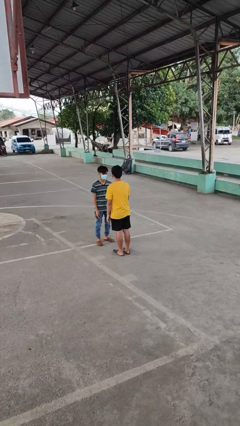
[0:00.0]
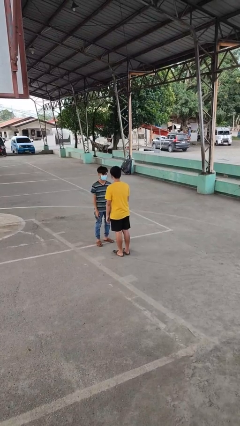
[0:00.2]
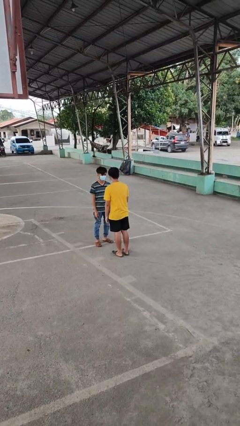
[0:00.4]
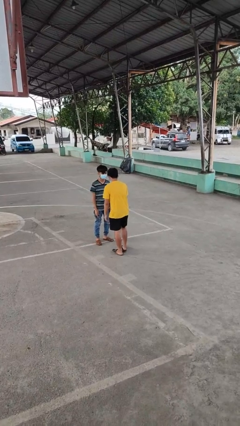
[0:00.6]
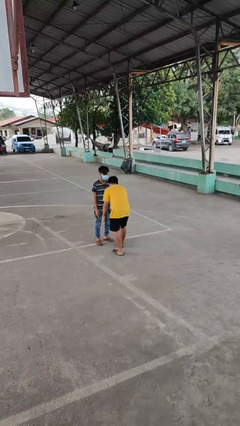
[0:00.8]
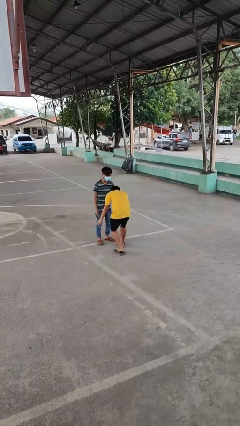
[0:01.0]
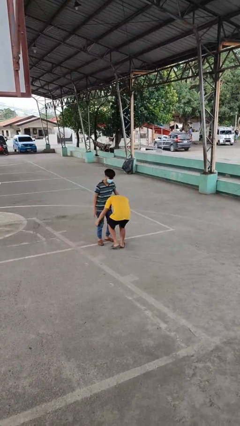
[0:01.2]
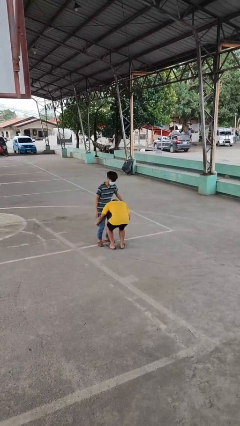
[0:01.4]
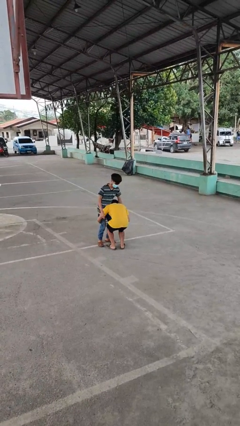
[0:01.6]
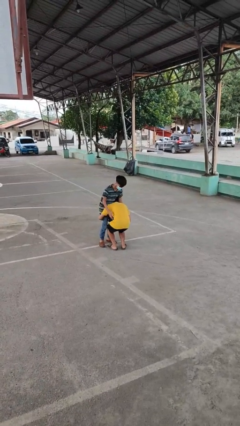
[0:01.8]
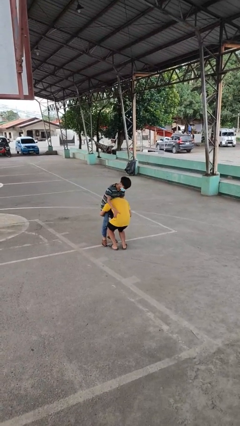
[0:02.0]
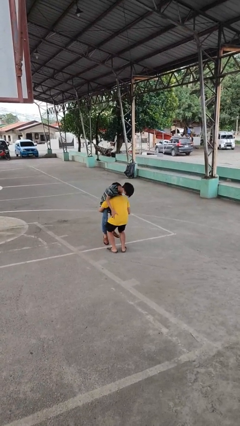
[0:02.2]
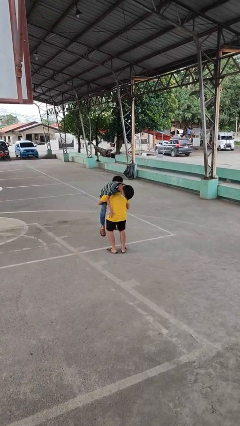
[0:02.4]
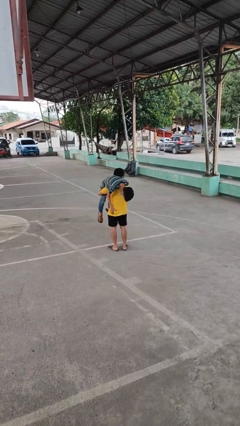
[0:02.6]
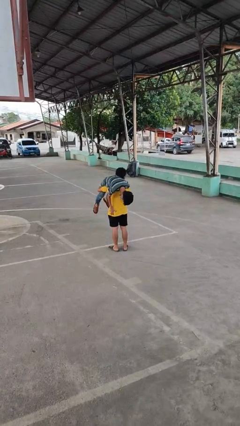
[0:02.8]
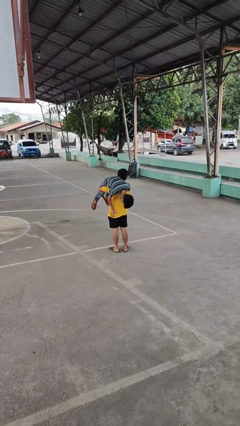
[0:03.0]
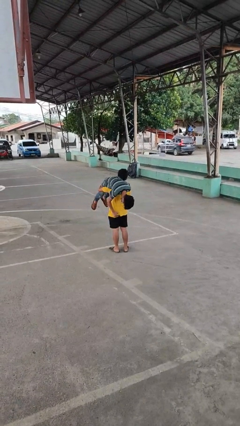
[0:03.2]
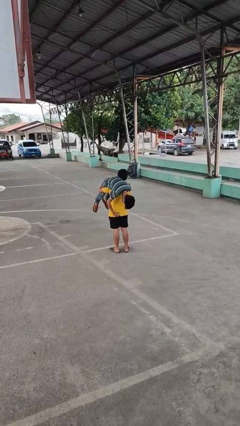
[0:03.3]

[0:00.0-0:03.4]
person carries person over shoulder

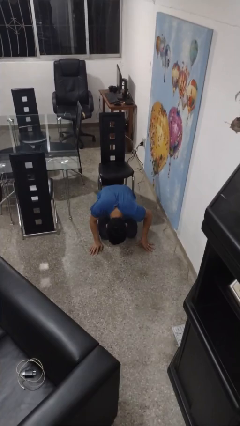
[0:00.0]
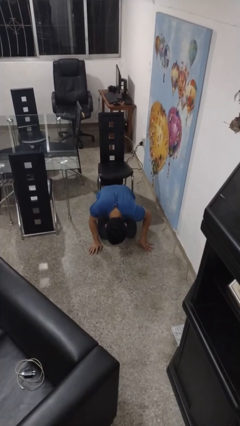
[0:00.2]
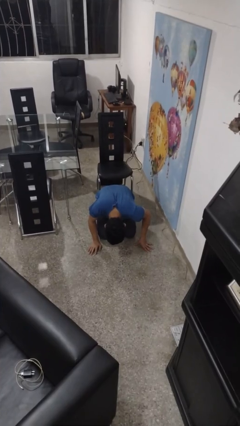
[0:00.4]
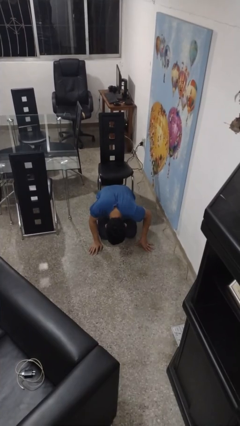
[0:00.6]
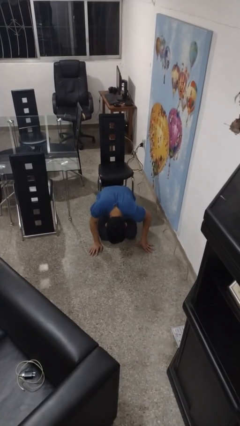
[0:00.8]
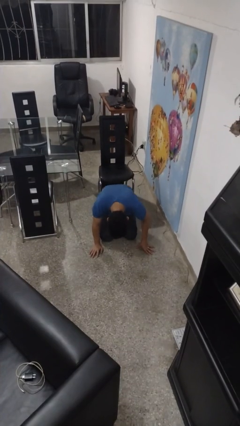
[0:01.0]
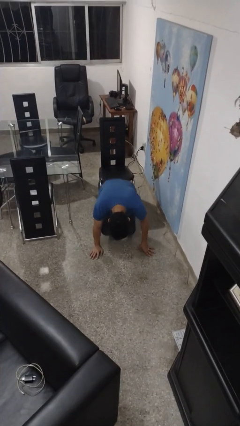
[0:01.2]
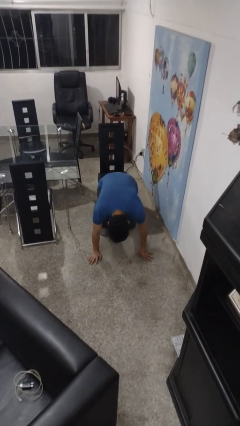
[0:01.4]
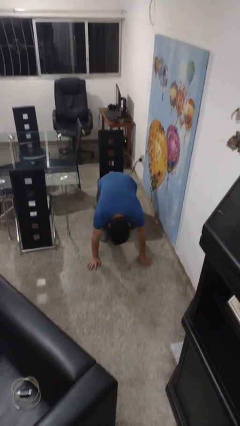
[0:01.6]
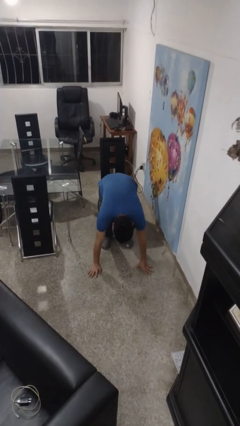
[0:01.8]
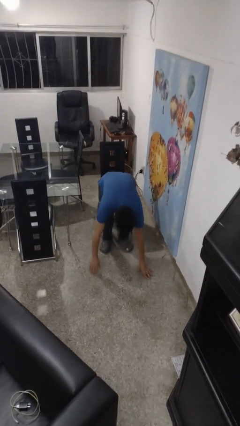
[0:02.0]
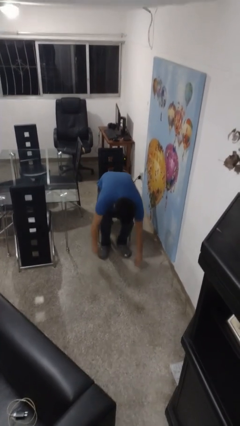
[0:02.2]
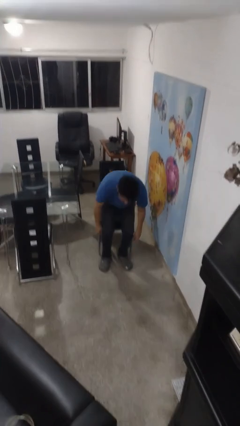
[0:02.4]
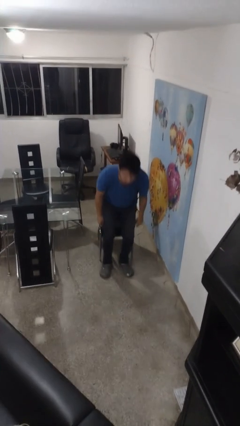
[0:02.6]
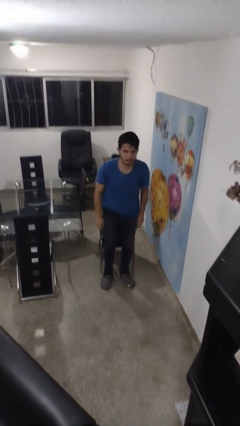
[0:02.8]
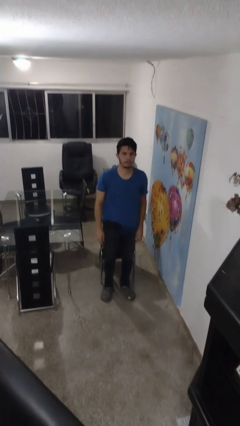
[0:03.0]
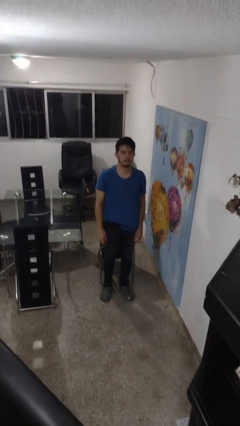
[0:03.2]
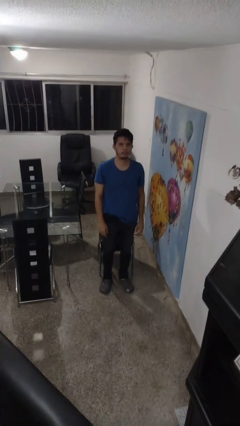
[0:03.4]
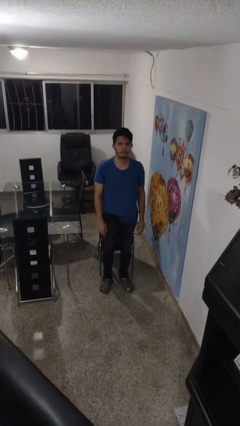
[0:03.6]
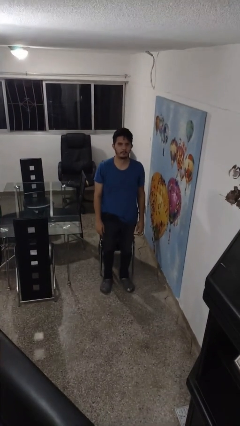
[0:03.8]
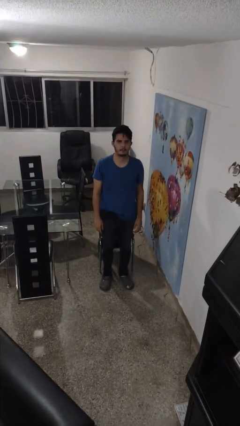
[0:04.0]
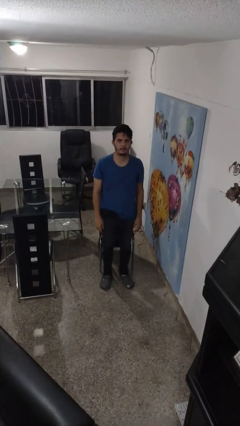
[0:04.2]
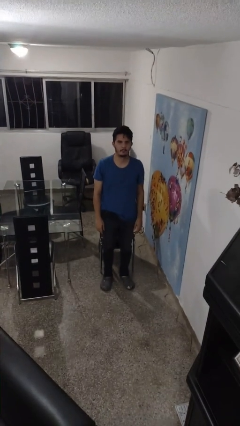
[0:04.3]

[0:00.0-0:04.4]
person stands up from floor

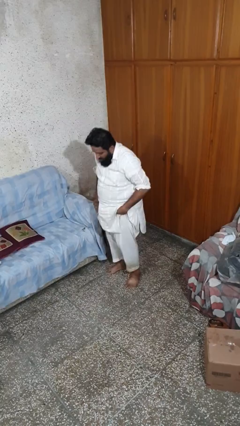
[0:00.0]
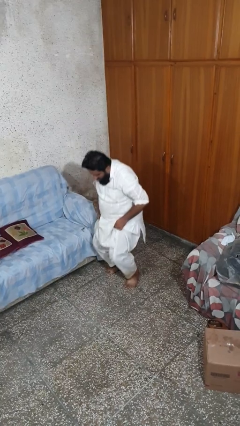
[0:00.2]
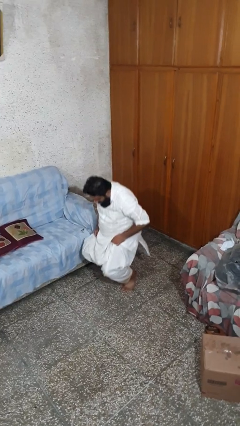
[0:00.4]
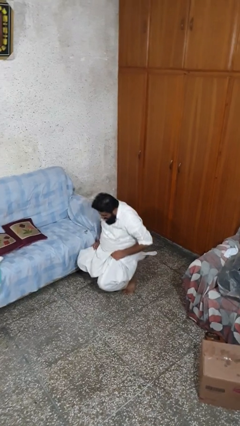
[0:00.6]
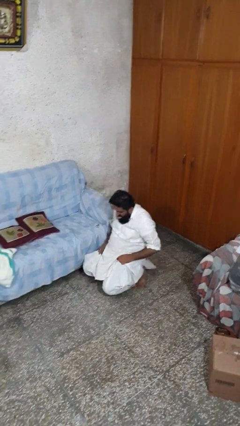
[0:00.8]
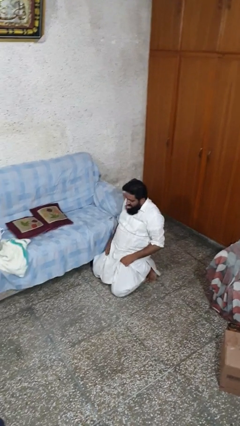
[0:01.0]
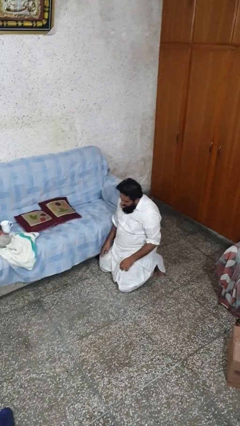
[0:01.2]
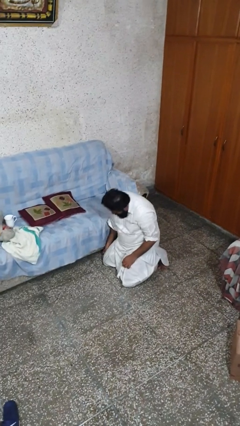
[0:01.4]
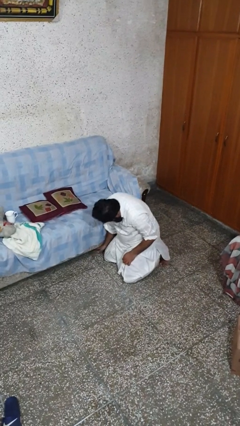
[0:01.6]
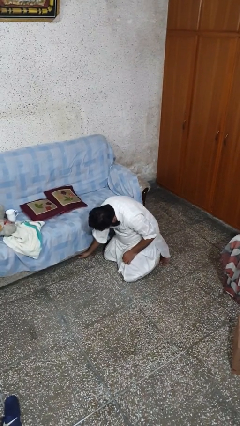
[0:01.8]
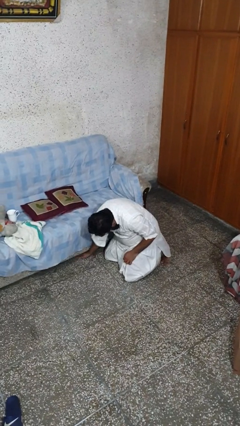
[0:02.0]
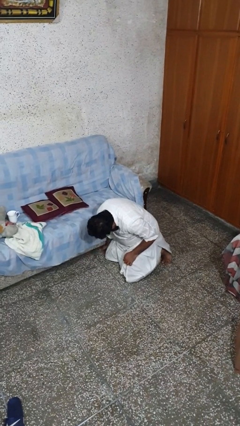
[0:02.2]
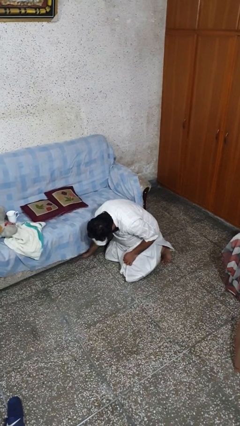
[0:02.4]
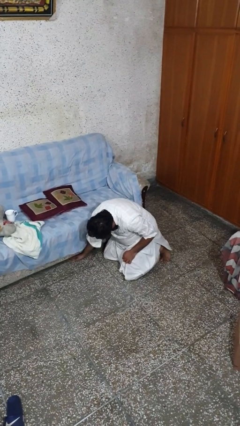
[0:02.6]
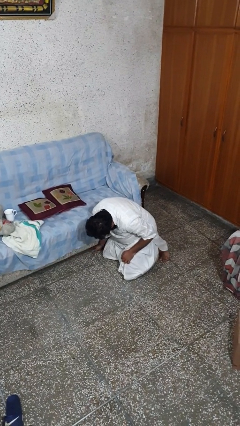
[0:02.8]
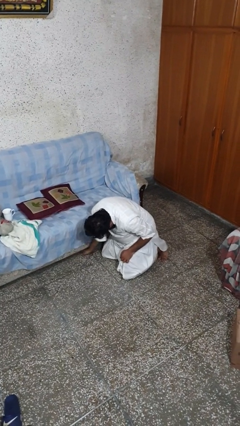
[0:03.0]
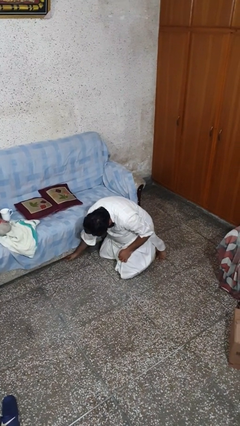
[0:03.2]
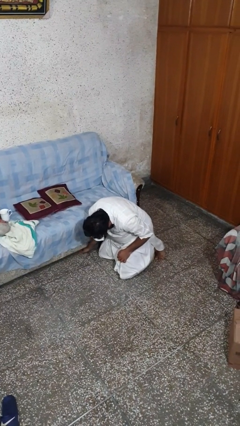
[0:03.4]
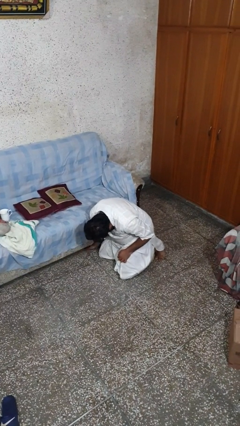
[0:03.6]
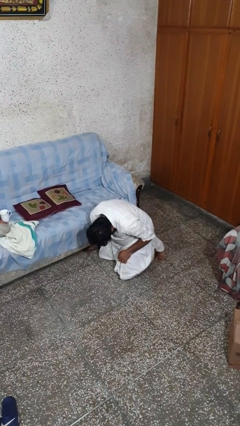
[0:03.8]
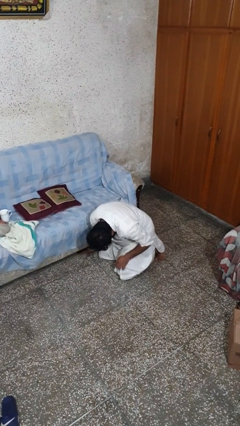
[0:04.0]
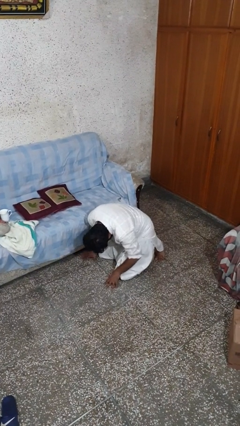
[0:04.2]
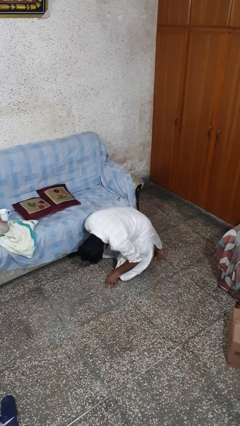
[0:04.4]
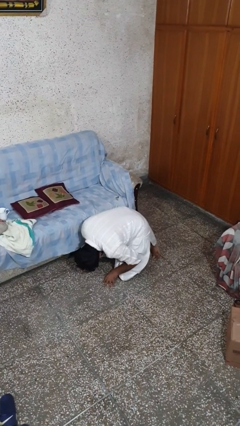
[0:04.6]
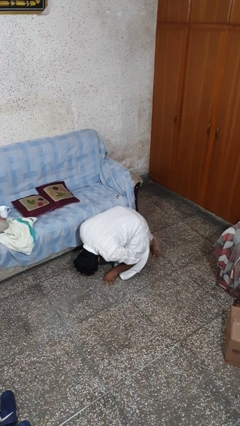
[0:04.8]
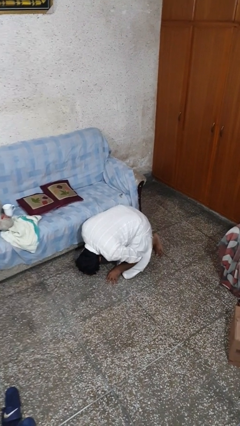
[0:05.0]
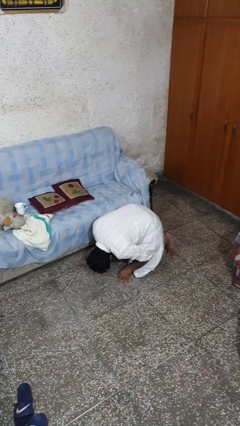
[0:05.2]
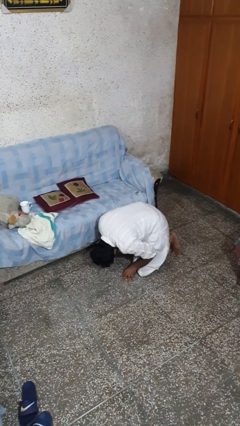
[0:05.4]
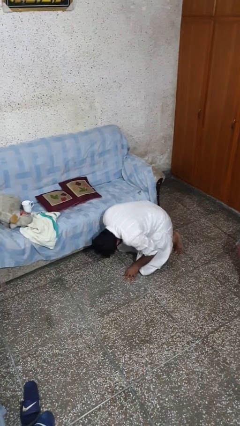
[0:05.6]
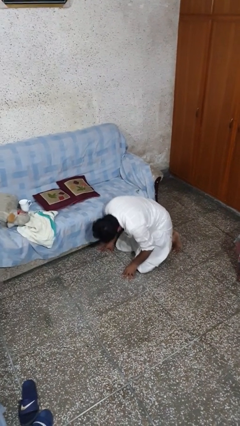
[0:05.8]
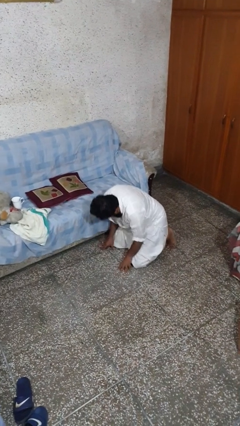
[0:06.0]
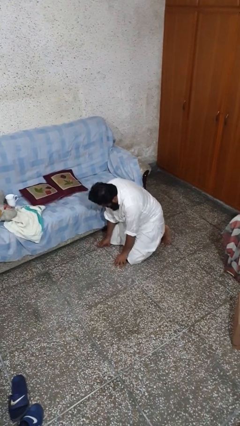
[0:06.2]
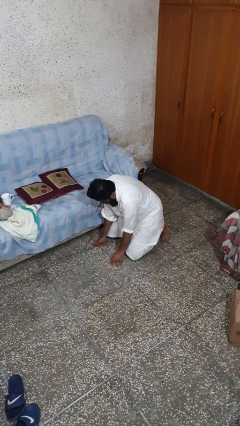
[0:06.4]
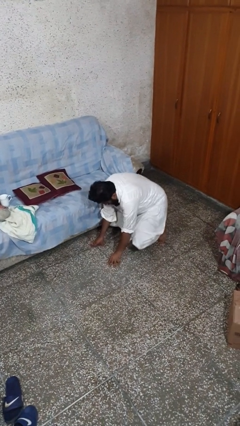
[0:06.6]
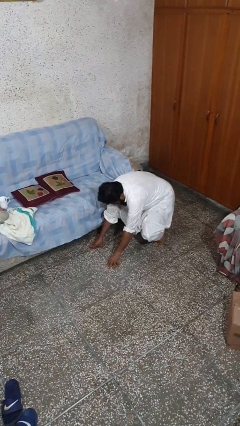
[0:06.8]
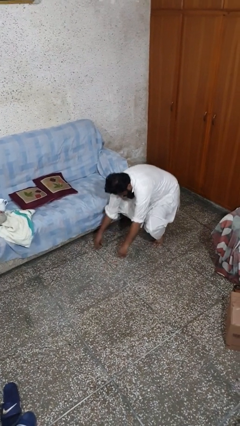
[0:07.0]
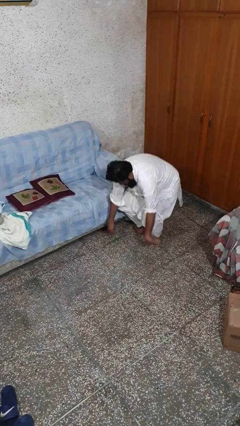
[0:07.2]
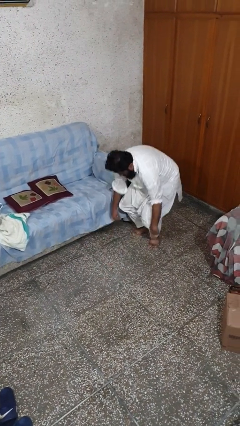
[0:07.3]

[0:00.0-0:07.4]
person searches under couch

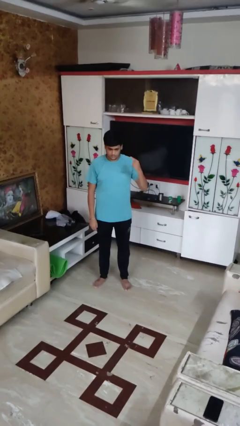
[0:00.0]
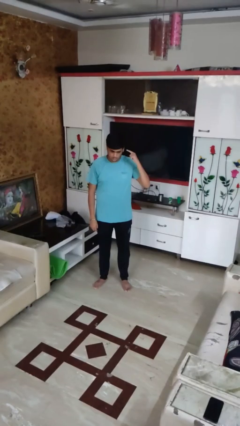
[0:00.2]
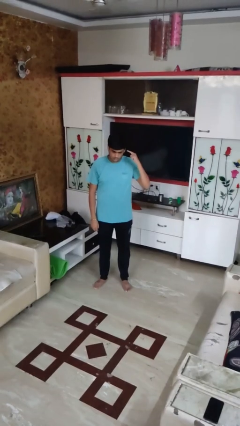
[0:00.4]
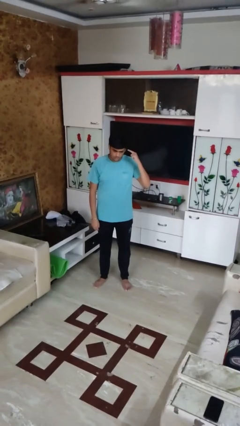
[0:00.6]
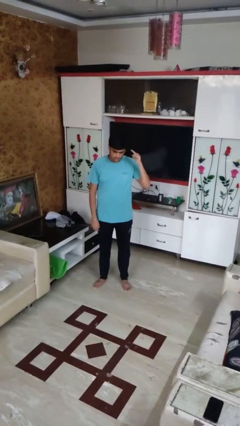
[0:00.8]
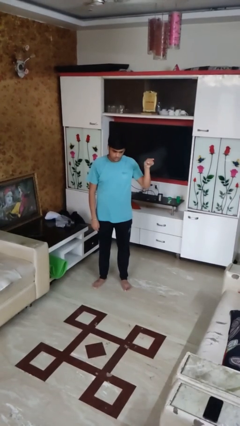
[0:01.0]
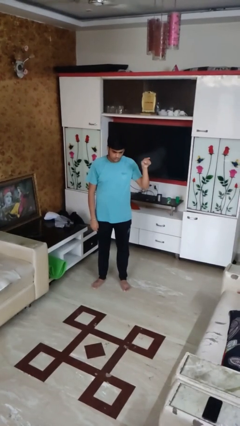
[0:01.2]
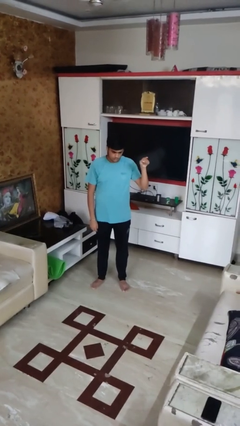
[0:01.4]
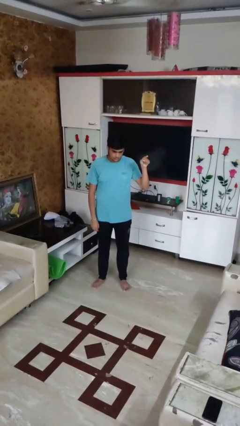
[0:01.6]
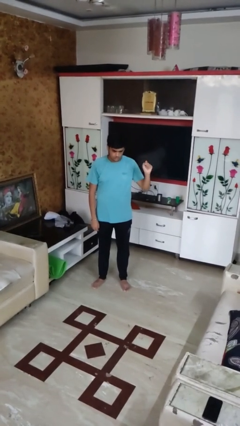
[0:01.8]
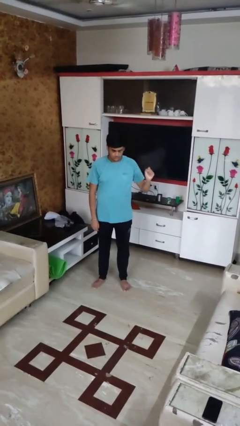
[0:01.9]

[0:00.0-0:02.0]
person gestures listen closely

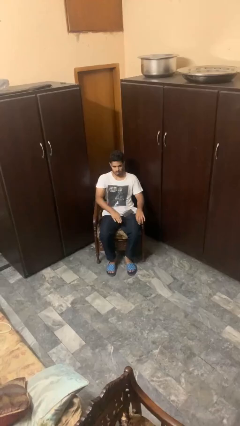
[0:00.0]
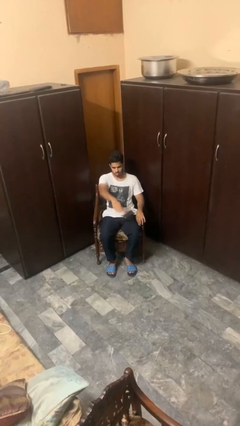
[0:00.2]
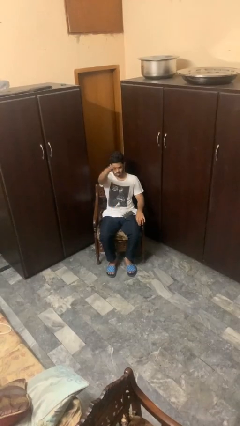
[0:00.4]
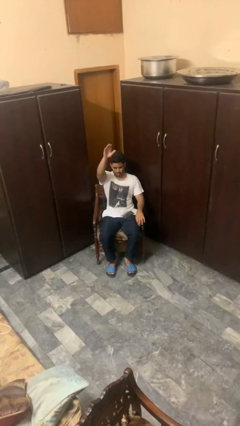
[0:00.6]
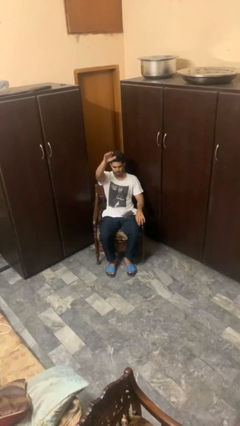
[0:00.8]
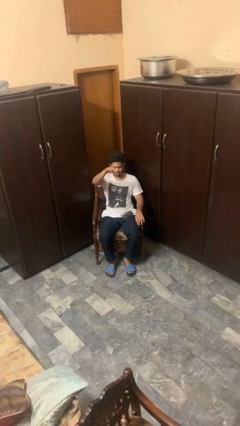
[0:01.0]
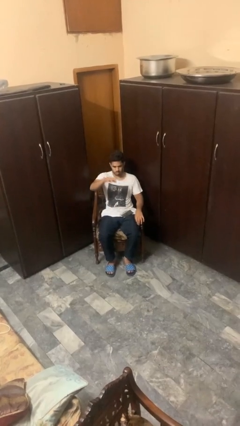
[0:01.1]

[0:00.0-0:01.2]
person gestures swipe up
